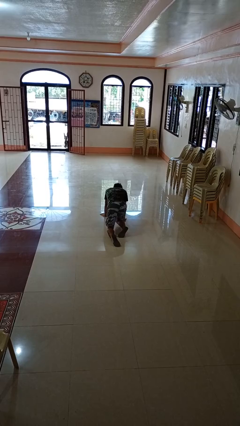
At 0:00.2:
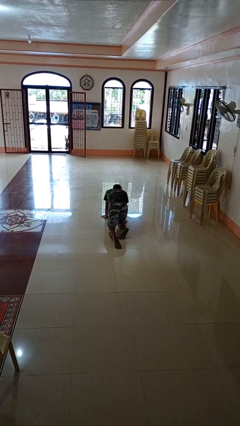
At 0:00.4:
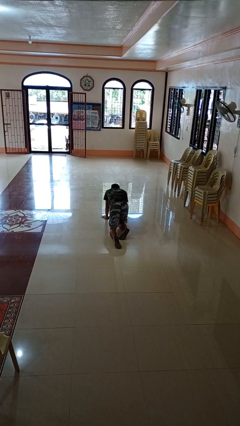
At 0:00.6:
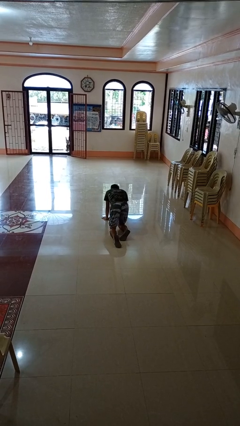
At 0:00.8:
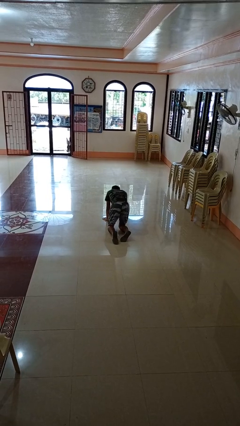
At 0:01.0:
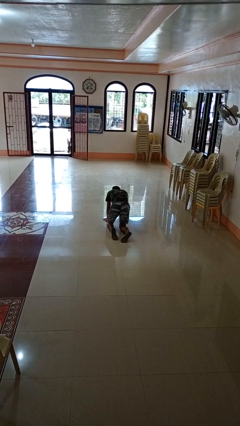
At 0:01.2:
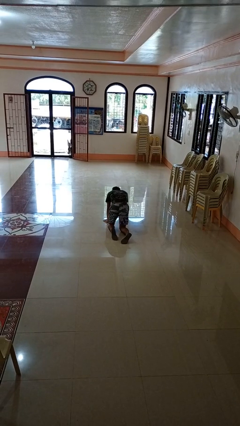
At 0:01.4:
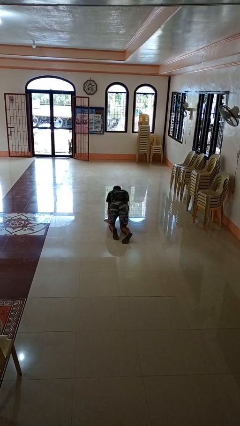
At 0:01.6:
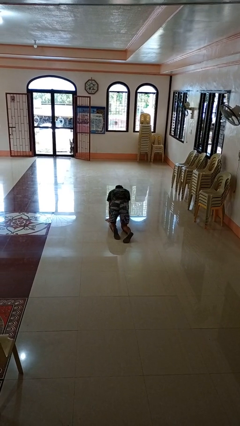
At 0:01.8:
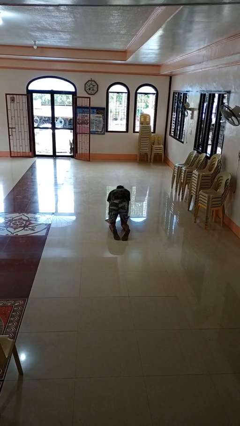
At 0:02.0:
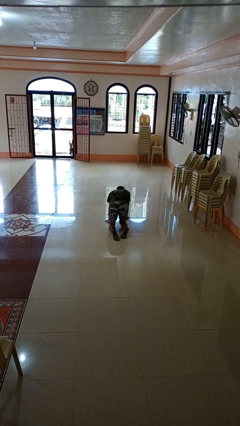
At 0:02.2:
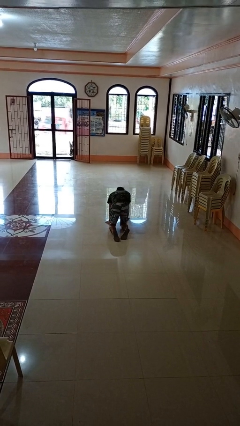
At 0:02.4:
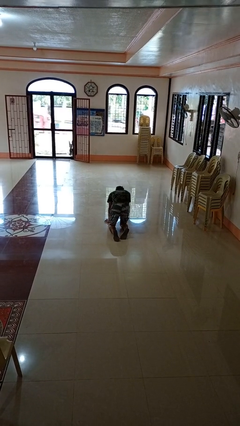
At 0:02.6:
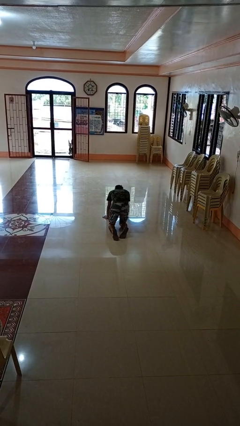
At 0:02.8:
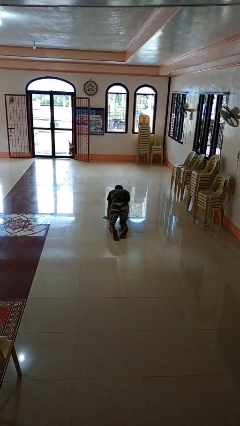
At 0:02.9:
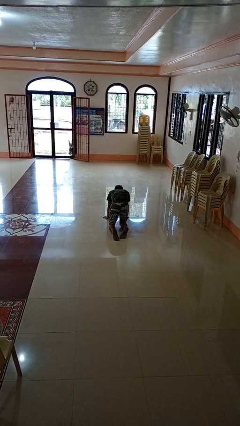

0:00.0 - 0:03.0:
person crawls

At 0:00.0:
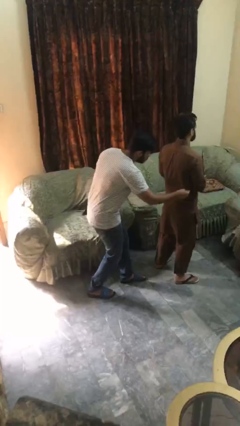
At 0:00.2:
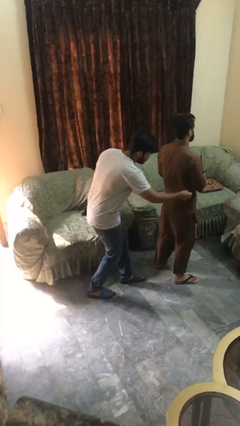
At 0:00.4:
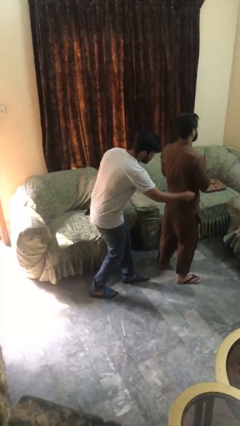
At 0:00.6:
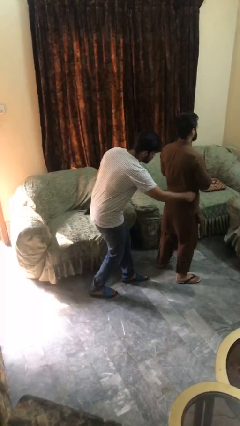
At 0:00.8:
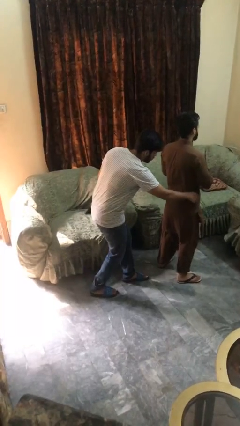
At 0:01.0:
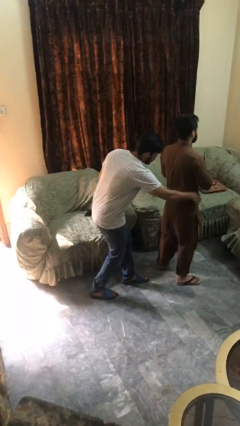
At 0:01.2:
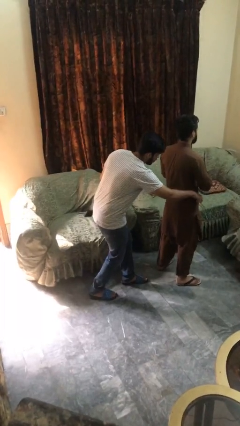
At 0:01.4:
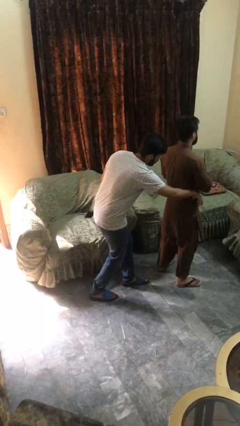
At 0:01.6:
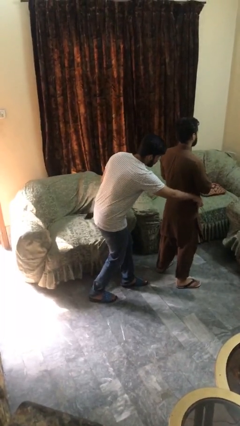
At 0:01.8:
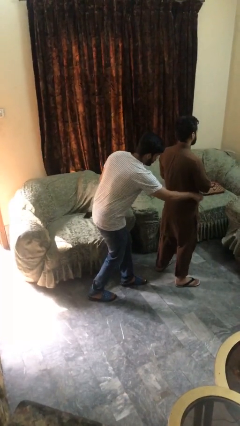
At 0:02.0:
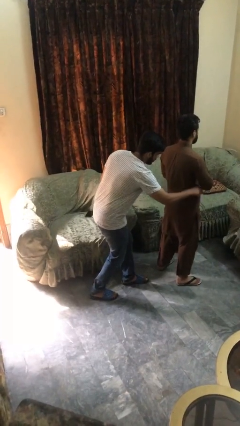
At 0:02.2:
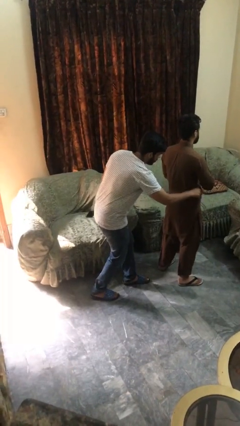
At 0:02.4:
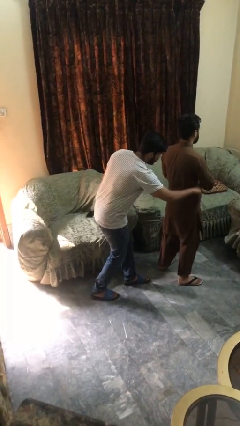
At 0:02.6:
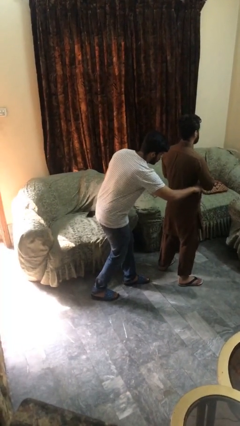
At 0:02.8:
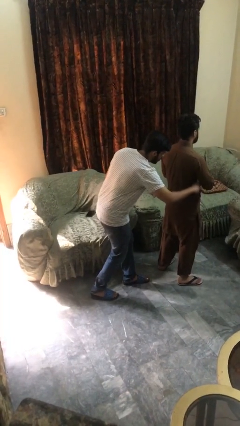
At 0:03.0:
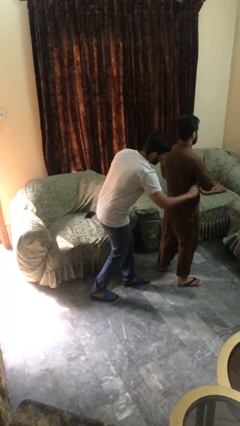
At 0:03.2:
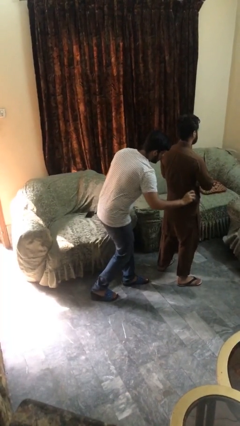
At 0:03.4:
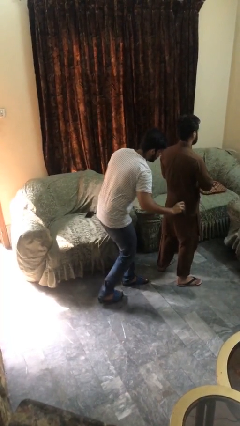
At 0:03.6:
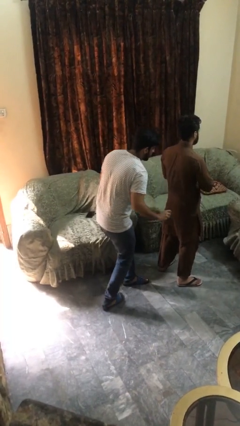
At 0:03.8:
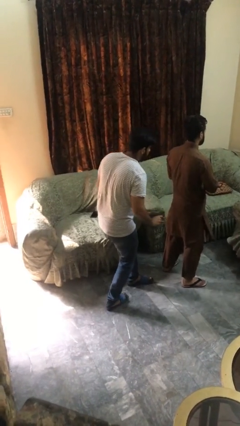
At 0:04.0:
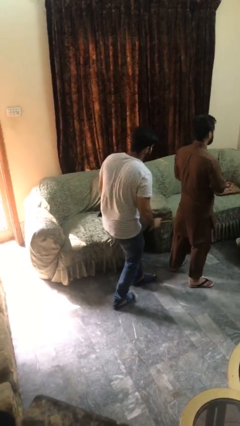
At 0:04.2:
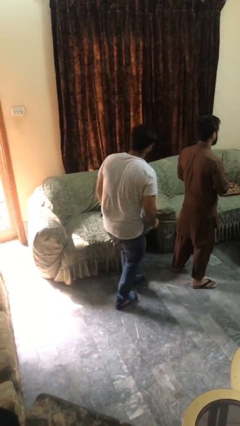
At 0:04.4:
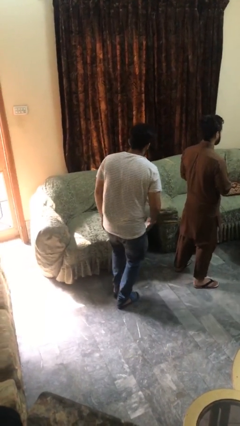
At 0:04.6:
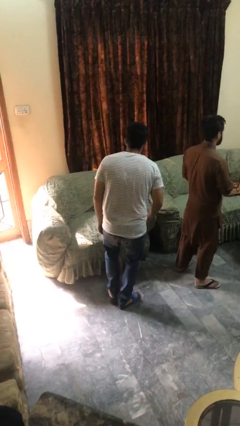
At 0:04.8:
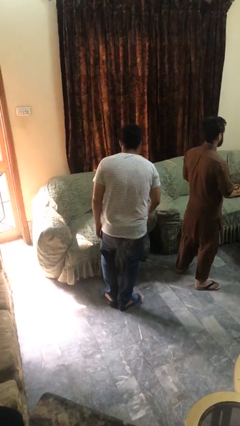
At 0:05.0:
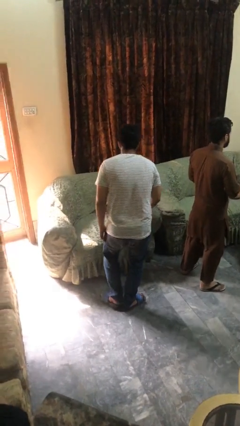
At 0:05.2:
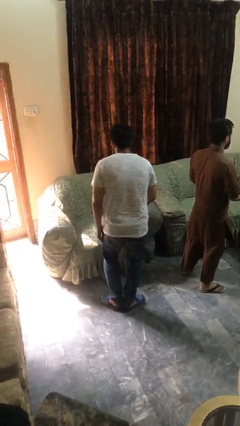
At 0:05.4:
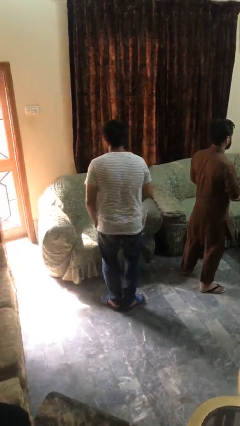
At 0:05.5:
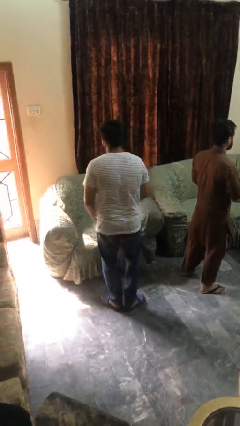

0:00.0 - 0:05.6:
person steals object from person

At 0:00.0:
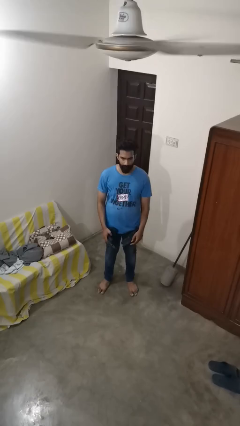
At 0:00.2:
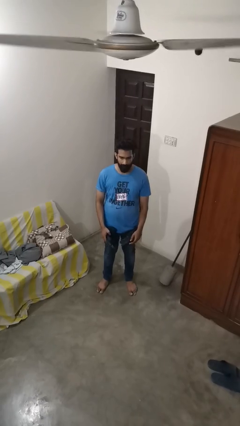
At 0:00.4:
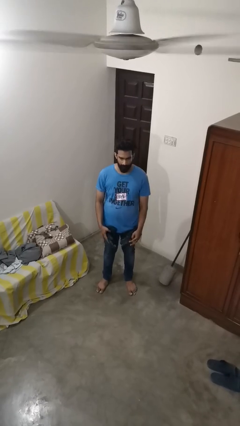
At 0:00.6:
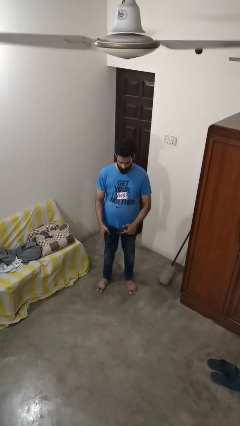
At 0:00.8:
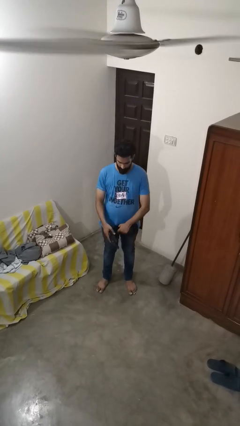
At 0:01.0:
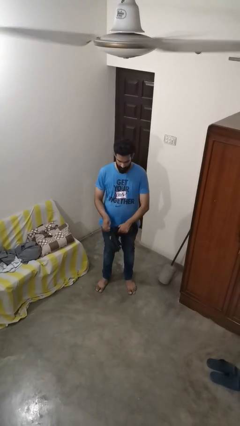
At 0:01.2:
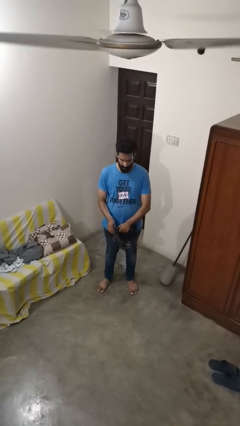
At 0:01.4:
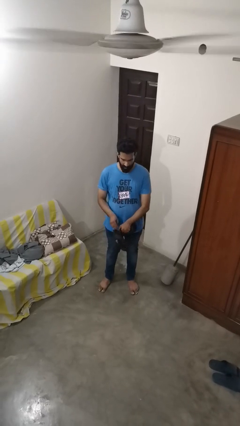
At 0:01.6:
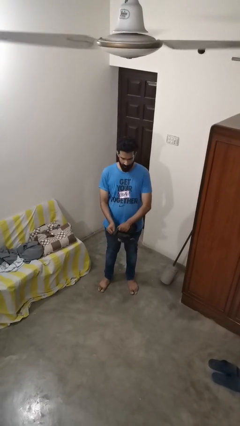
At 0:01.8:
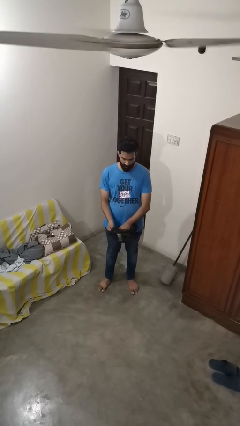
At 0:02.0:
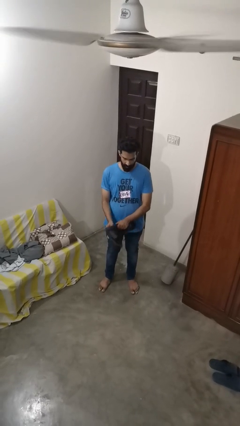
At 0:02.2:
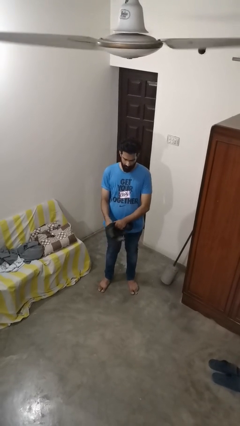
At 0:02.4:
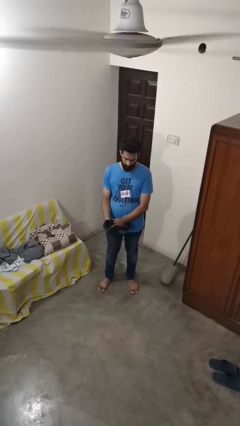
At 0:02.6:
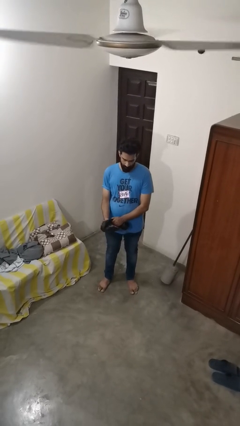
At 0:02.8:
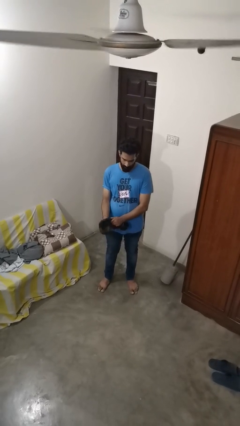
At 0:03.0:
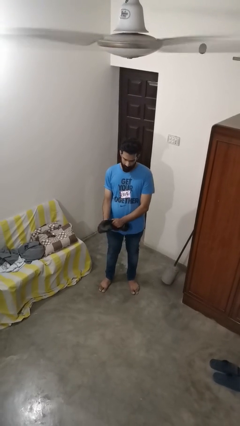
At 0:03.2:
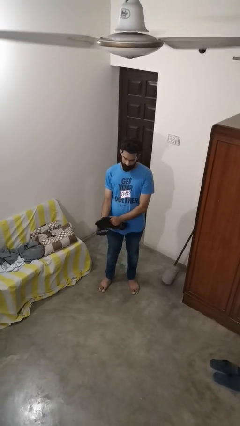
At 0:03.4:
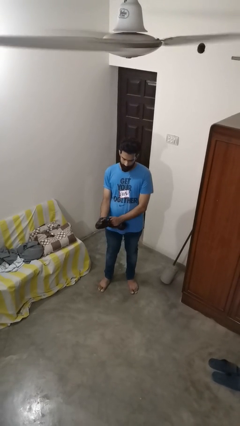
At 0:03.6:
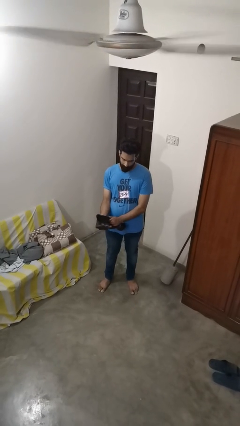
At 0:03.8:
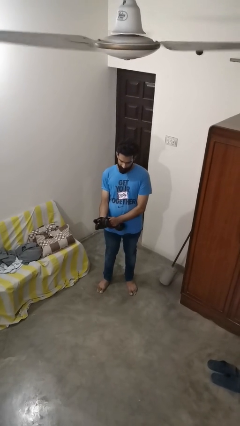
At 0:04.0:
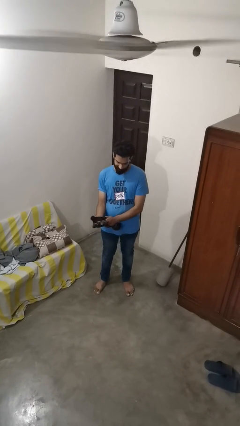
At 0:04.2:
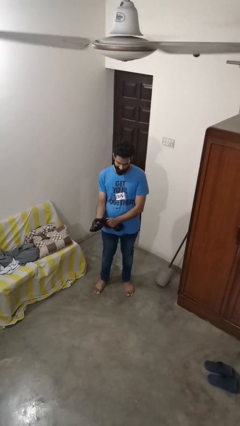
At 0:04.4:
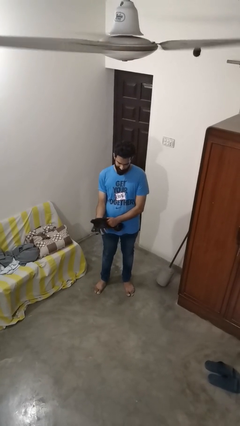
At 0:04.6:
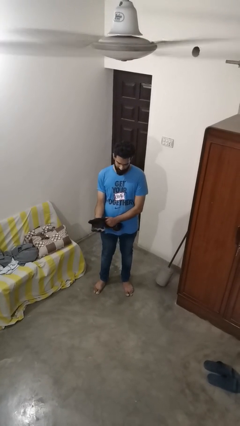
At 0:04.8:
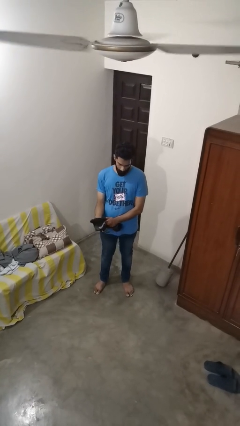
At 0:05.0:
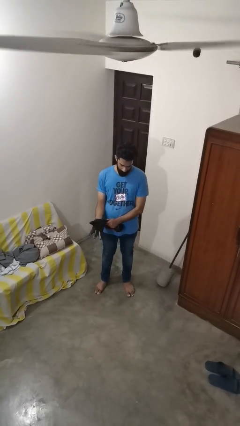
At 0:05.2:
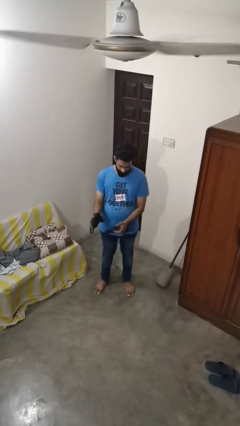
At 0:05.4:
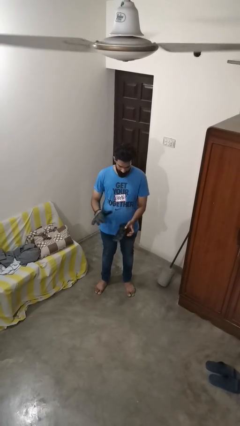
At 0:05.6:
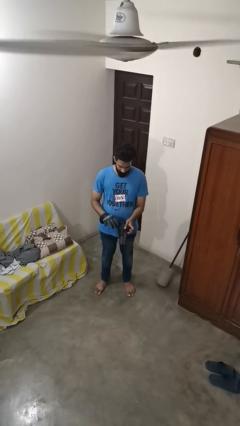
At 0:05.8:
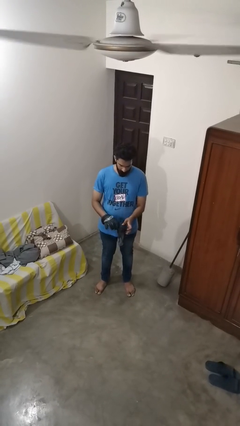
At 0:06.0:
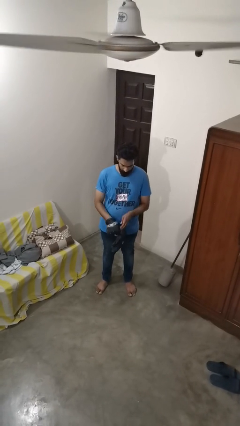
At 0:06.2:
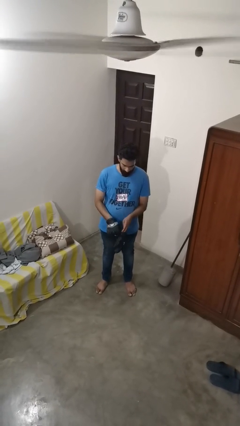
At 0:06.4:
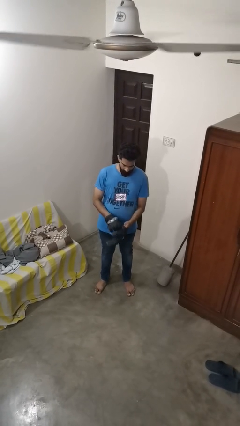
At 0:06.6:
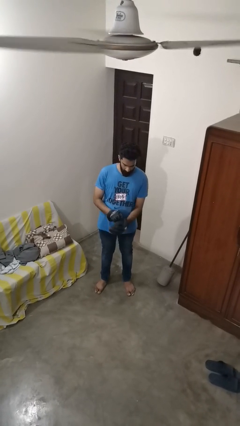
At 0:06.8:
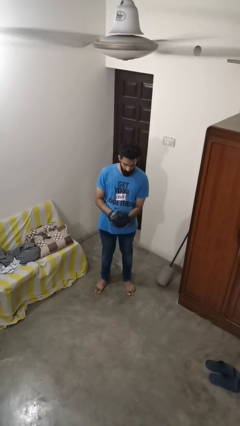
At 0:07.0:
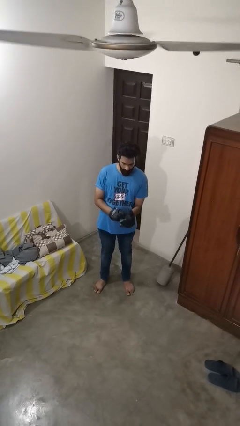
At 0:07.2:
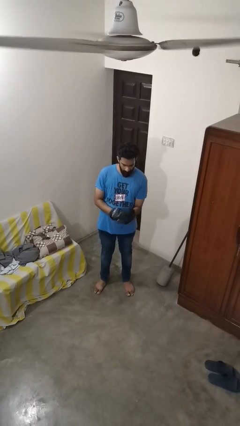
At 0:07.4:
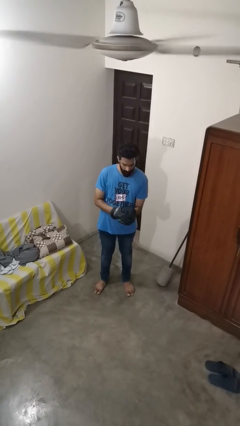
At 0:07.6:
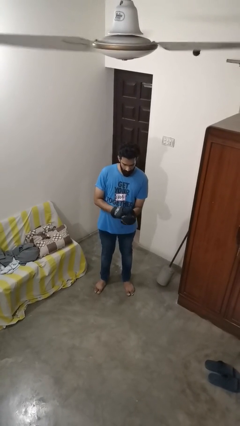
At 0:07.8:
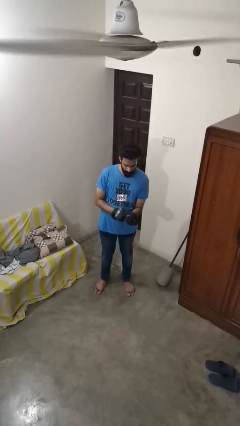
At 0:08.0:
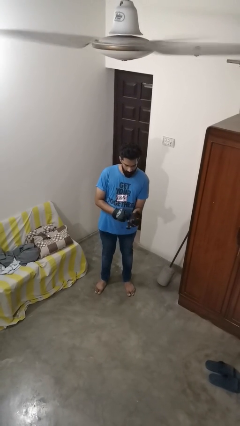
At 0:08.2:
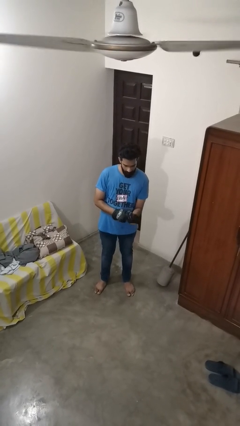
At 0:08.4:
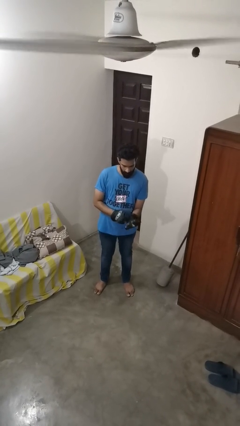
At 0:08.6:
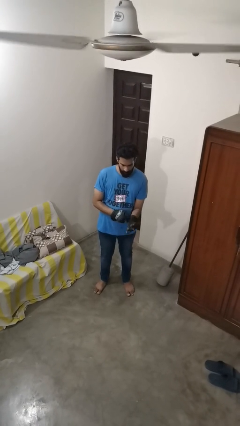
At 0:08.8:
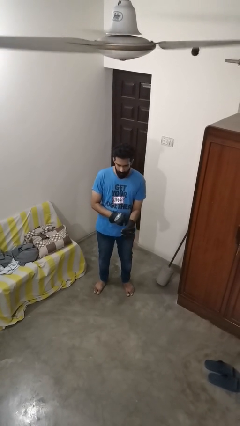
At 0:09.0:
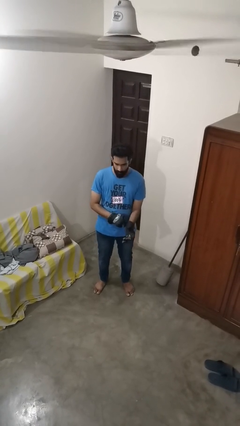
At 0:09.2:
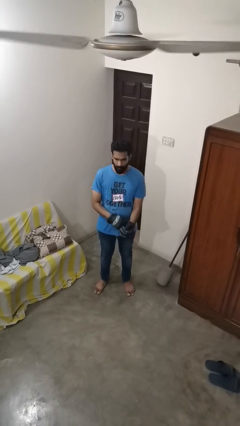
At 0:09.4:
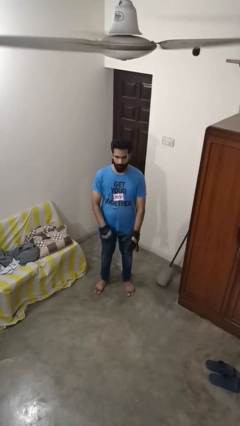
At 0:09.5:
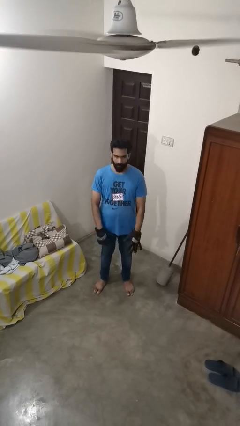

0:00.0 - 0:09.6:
person puts on gloves
